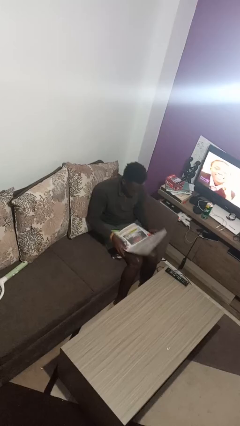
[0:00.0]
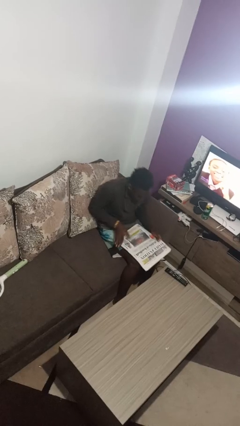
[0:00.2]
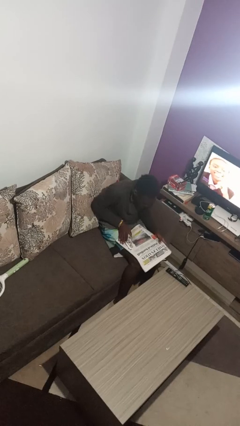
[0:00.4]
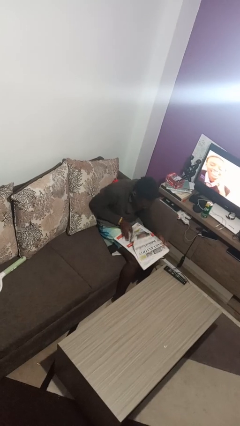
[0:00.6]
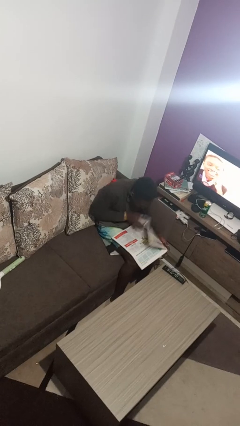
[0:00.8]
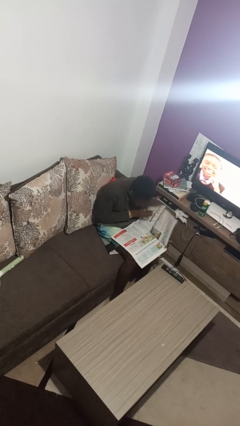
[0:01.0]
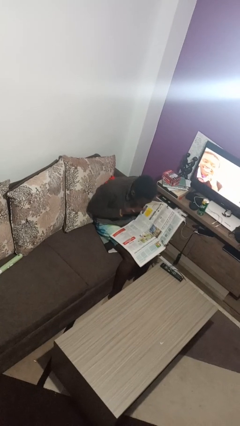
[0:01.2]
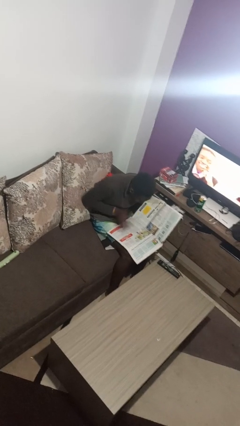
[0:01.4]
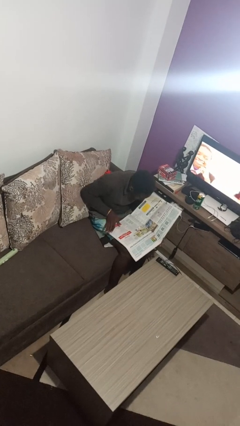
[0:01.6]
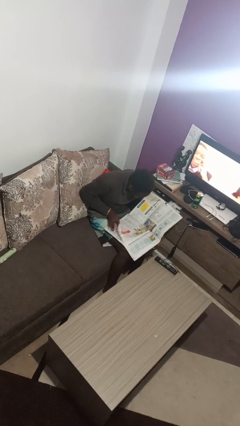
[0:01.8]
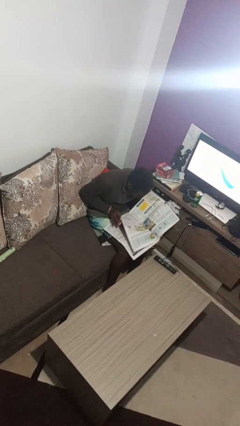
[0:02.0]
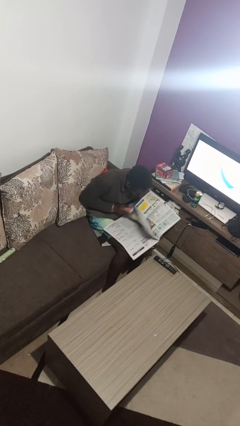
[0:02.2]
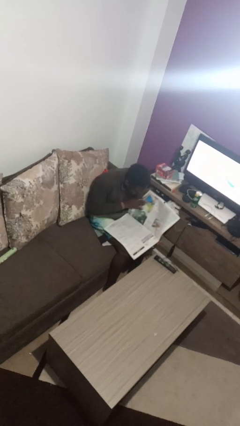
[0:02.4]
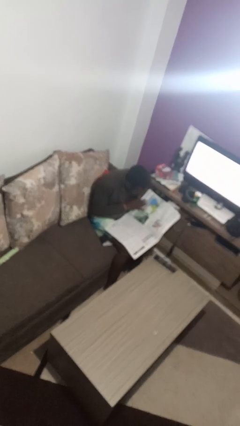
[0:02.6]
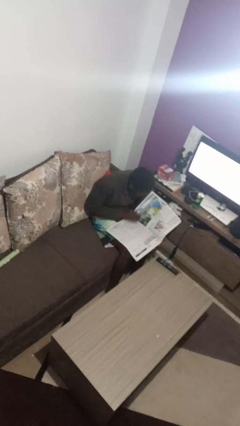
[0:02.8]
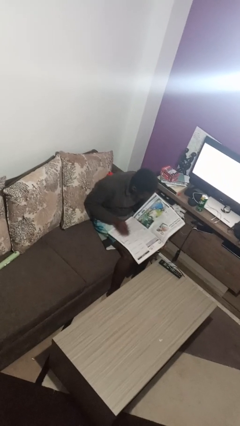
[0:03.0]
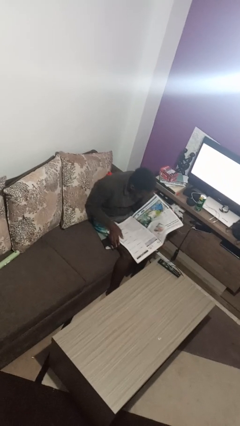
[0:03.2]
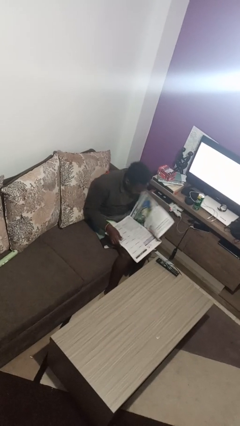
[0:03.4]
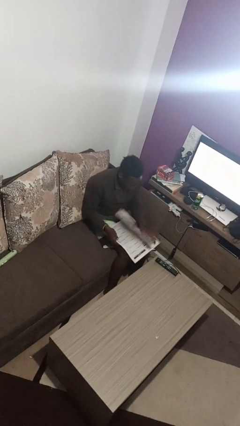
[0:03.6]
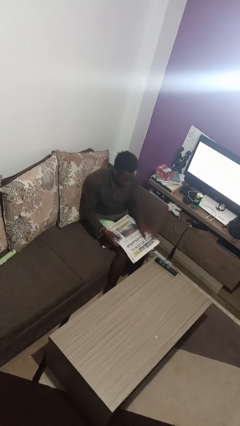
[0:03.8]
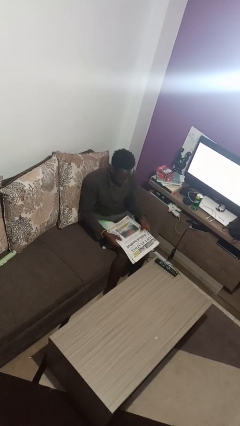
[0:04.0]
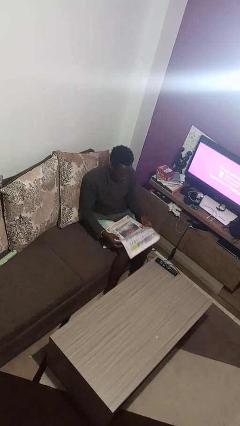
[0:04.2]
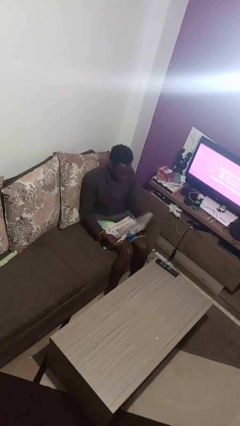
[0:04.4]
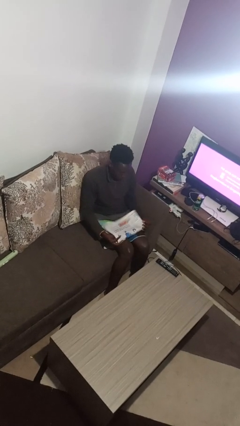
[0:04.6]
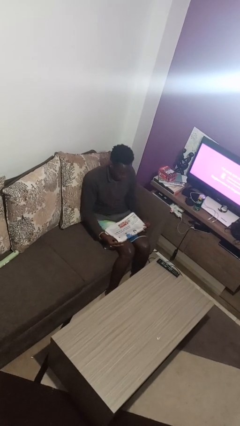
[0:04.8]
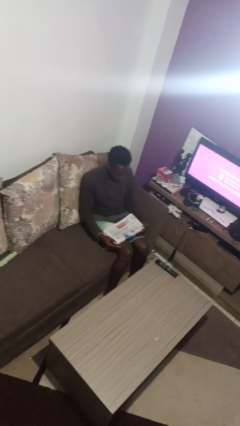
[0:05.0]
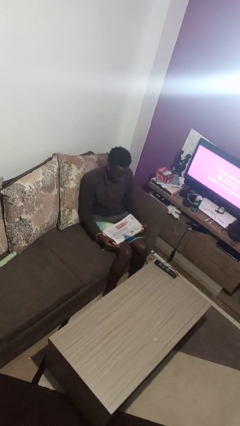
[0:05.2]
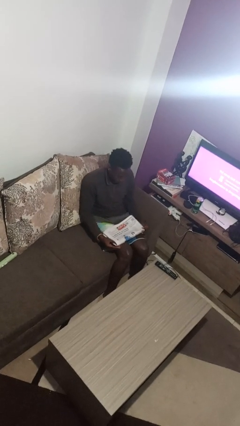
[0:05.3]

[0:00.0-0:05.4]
person reads newspaper

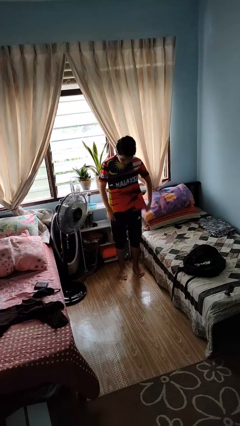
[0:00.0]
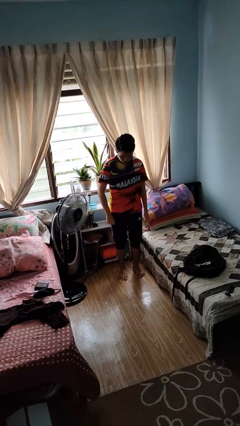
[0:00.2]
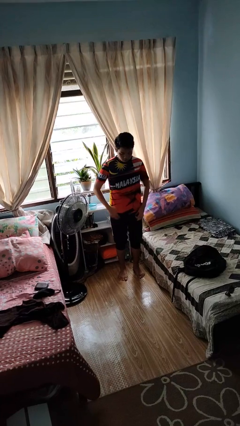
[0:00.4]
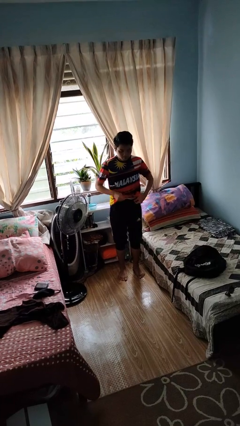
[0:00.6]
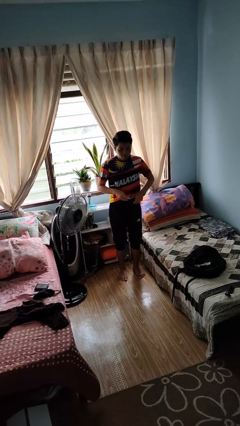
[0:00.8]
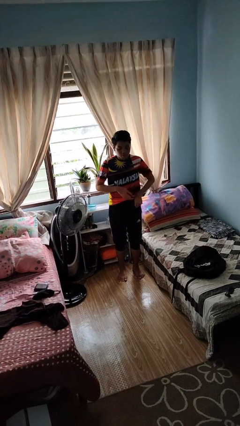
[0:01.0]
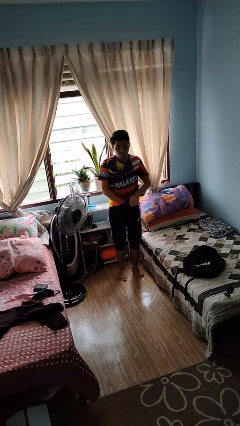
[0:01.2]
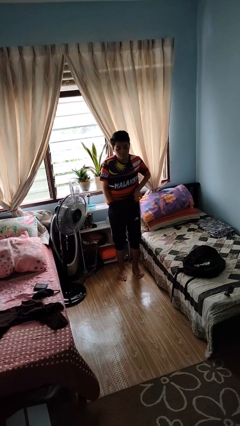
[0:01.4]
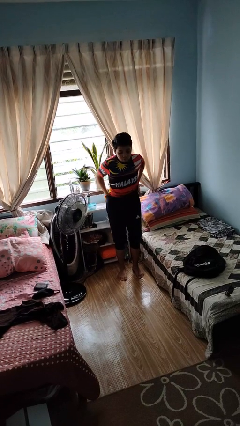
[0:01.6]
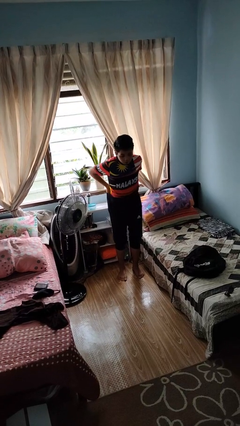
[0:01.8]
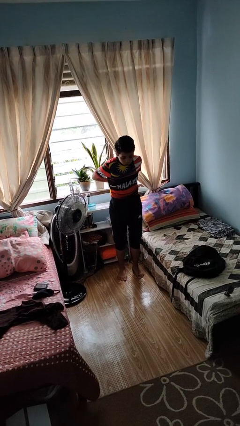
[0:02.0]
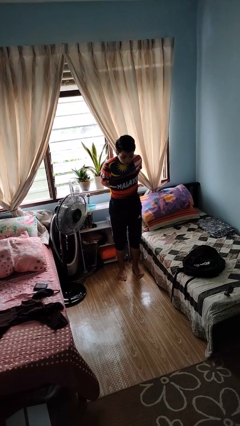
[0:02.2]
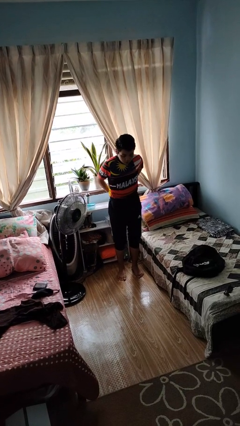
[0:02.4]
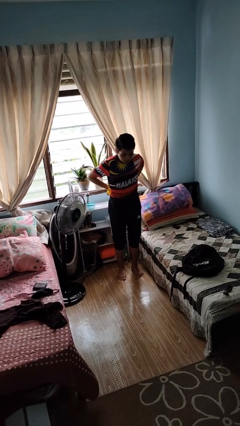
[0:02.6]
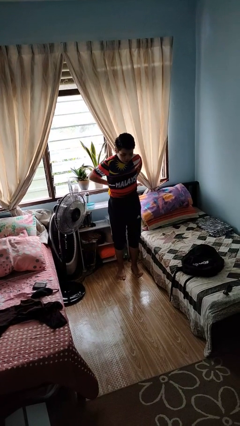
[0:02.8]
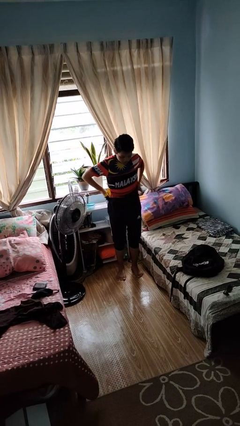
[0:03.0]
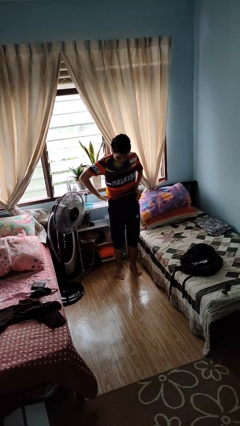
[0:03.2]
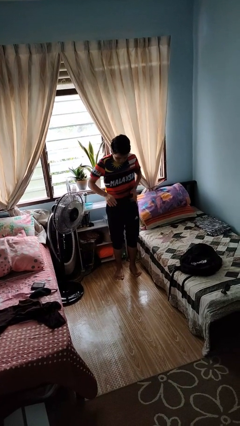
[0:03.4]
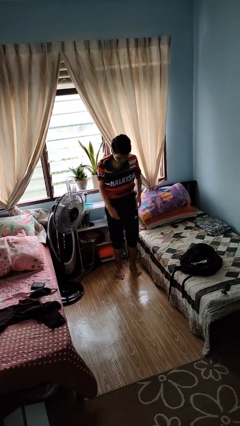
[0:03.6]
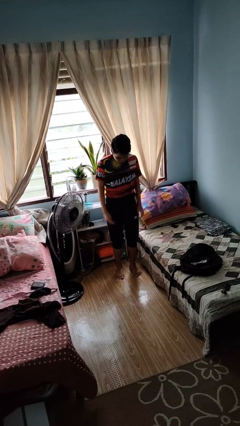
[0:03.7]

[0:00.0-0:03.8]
person tucks in shirt

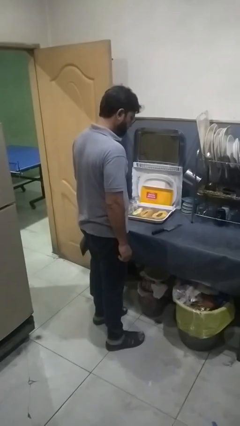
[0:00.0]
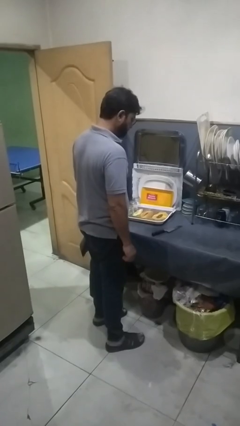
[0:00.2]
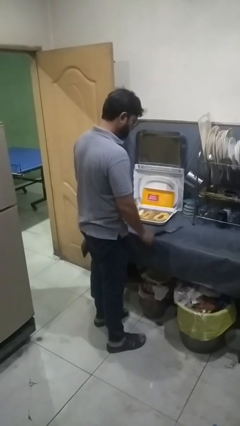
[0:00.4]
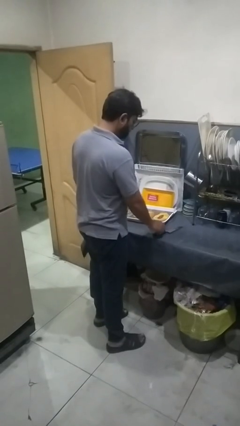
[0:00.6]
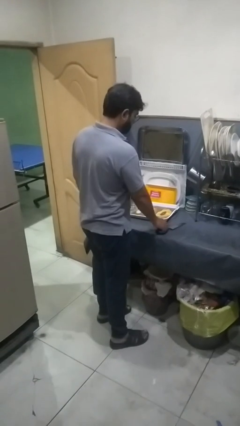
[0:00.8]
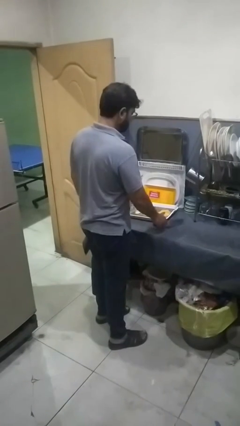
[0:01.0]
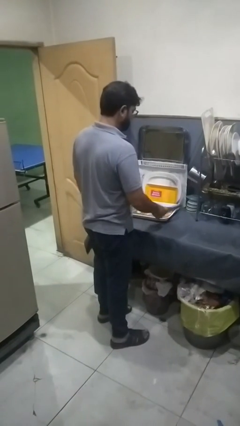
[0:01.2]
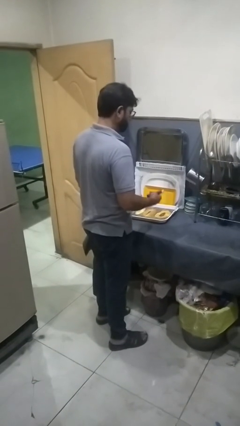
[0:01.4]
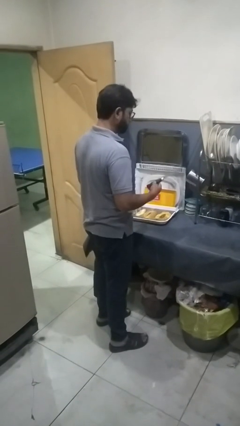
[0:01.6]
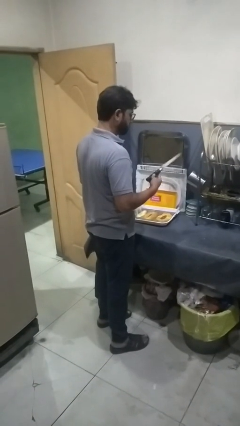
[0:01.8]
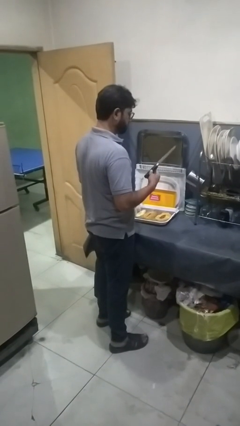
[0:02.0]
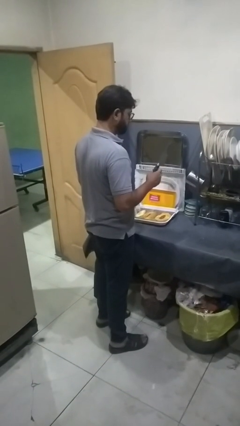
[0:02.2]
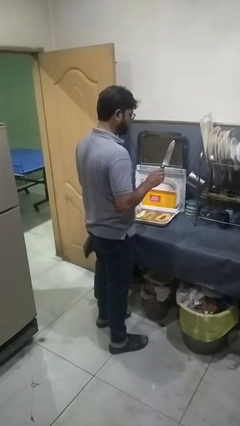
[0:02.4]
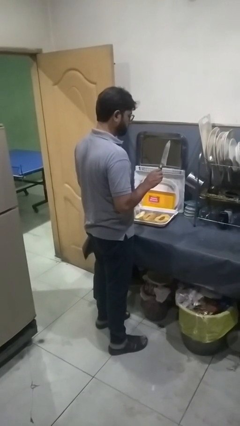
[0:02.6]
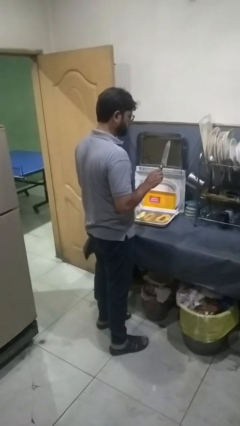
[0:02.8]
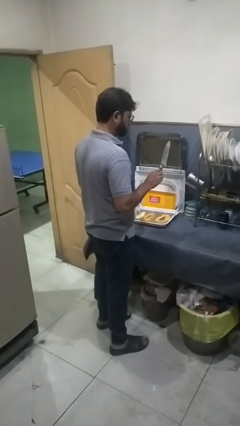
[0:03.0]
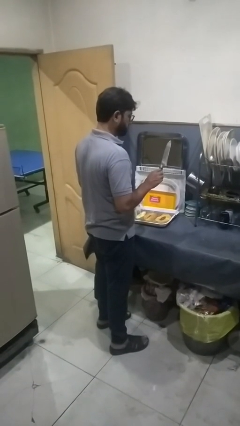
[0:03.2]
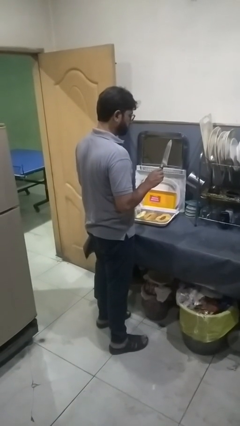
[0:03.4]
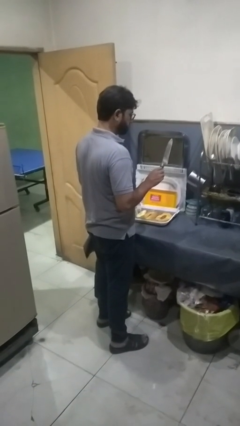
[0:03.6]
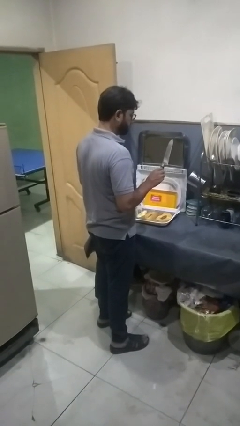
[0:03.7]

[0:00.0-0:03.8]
person picks up object from countertop

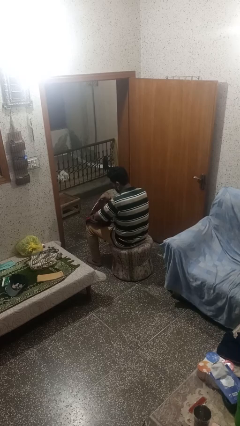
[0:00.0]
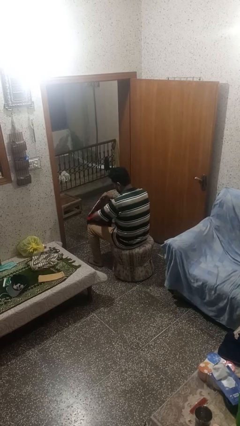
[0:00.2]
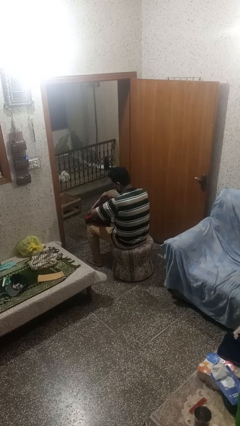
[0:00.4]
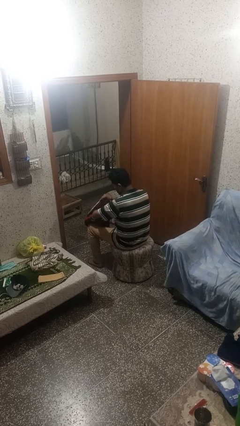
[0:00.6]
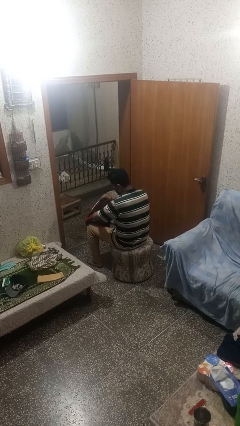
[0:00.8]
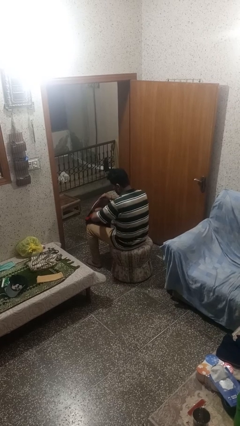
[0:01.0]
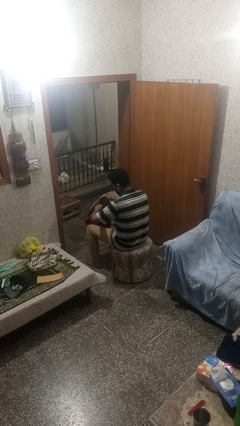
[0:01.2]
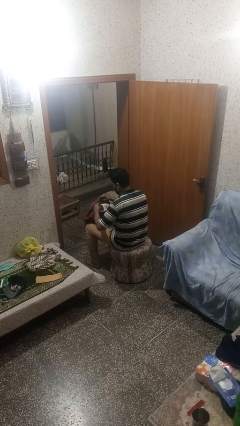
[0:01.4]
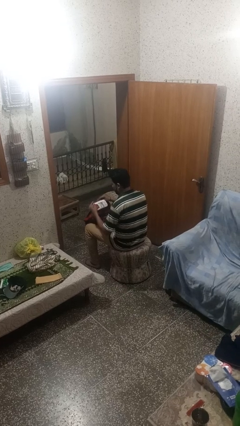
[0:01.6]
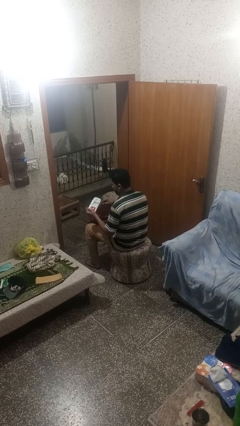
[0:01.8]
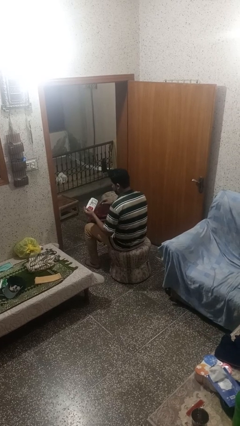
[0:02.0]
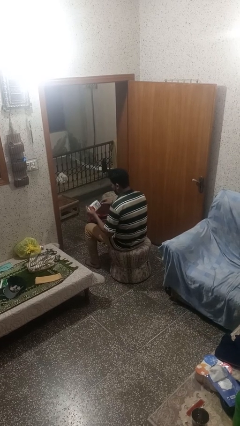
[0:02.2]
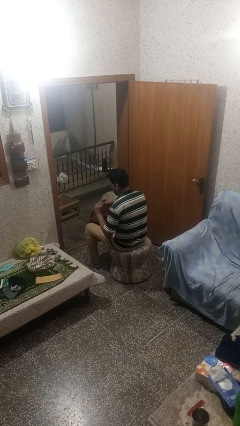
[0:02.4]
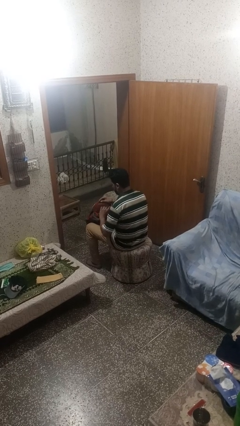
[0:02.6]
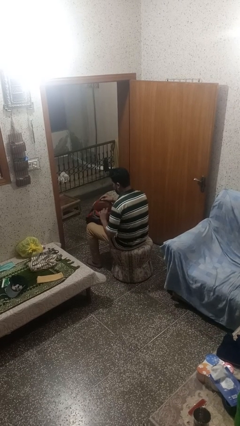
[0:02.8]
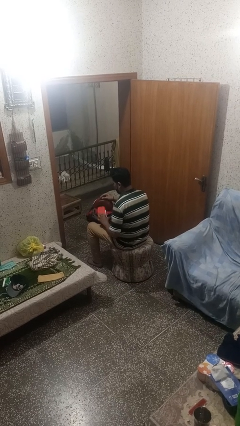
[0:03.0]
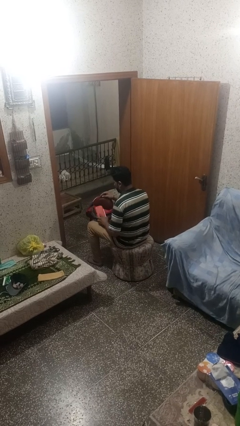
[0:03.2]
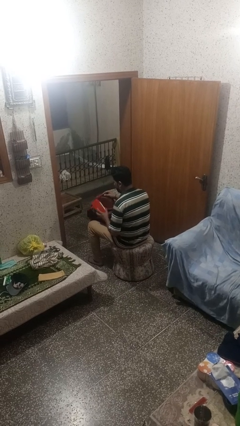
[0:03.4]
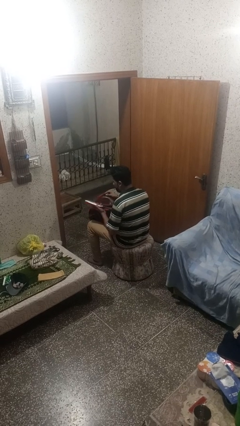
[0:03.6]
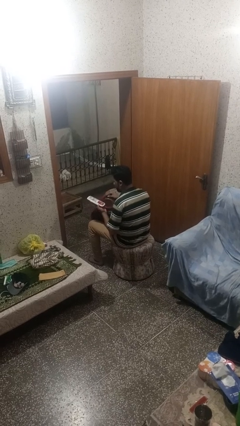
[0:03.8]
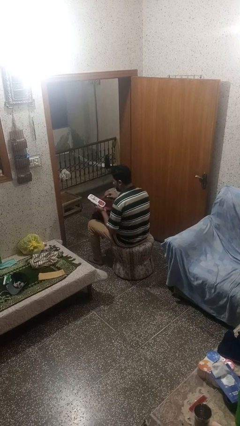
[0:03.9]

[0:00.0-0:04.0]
person takes object from backpack
